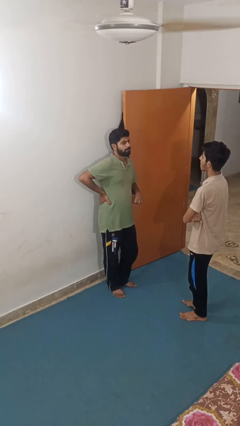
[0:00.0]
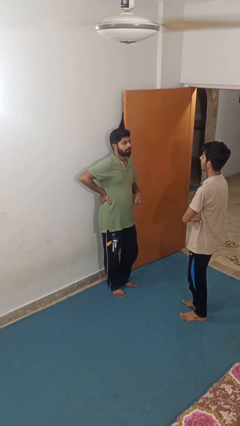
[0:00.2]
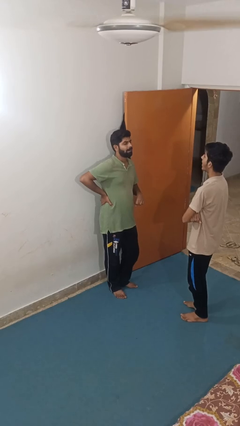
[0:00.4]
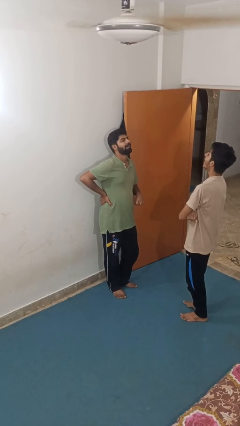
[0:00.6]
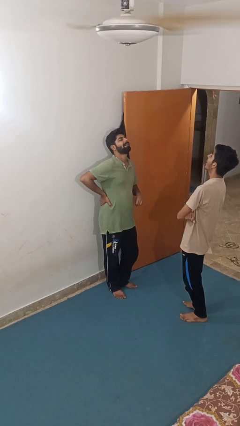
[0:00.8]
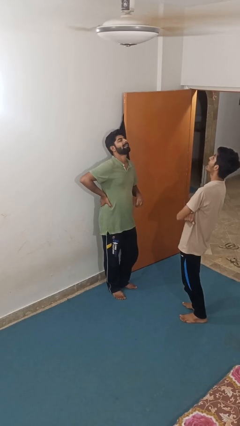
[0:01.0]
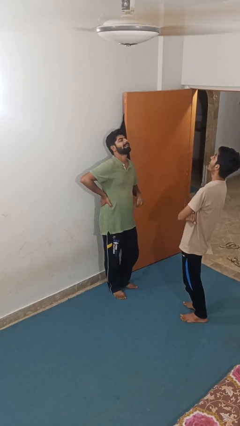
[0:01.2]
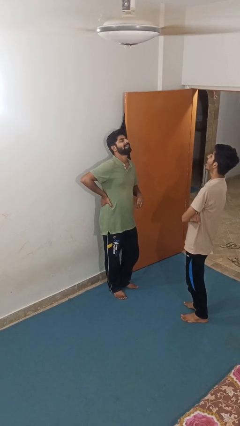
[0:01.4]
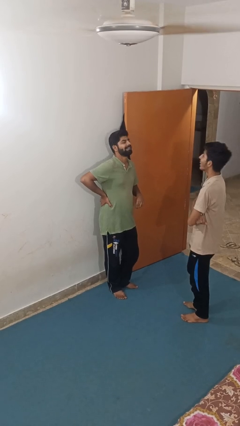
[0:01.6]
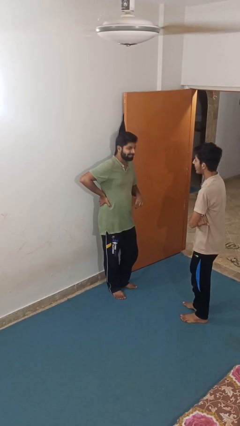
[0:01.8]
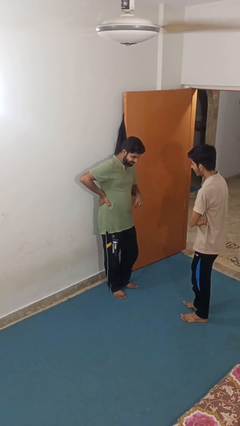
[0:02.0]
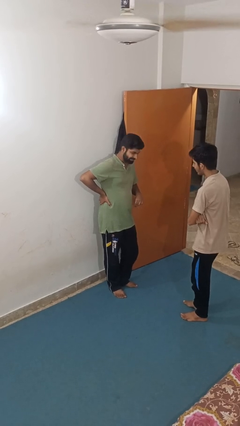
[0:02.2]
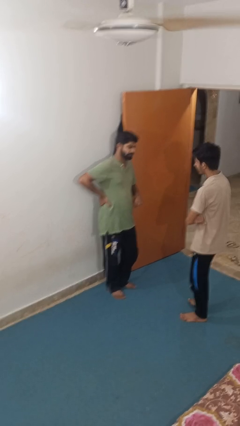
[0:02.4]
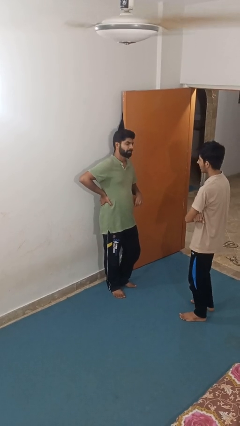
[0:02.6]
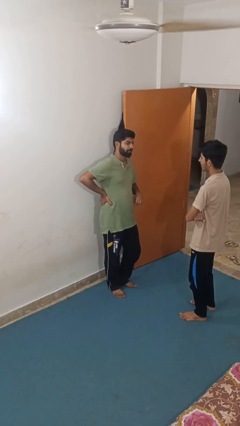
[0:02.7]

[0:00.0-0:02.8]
person laughs with person

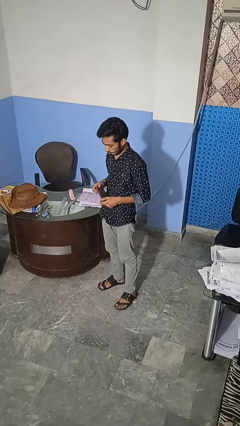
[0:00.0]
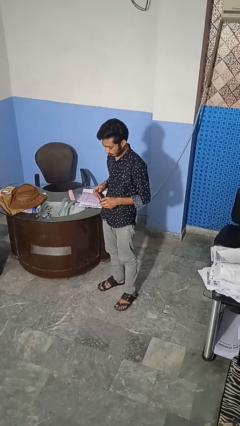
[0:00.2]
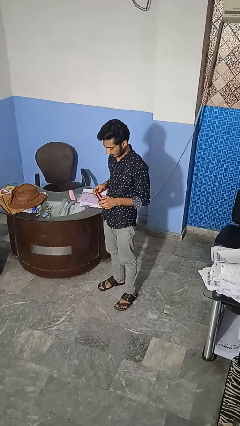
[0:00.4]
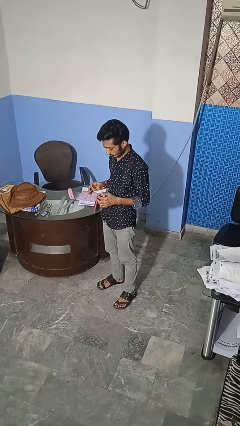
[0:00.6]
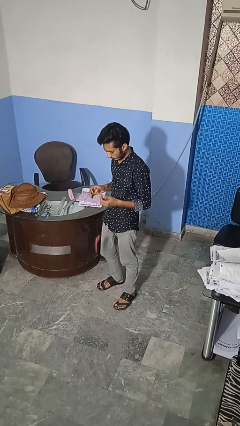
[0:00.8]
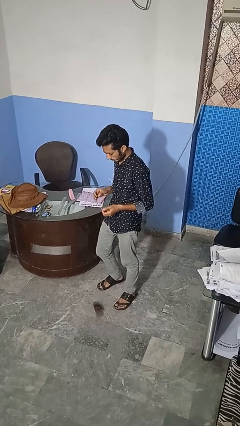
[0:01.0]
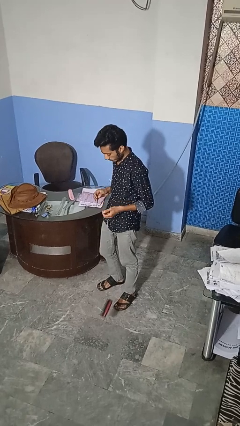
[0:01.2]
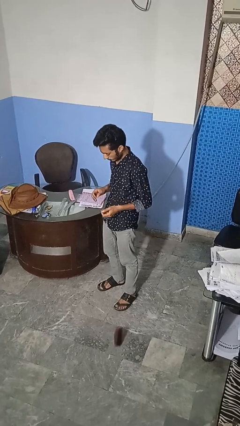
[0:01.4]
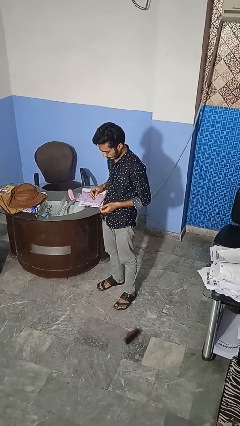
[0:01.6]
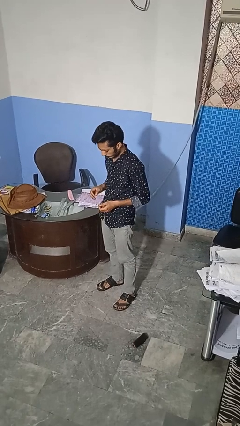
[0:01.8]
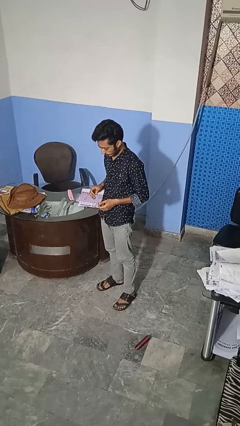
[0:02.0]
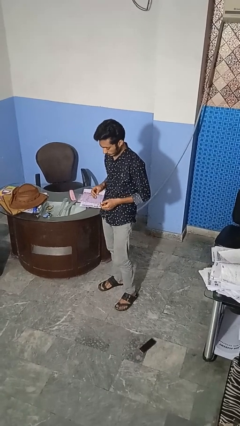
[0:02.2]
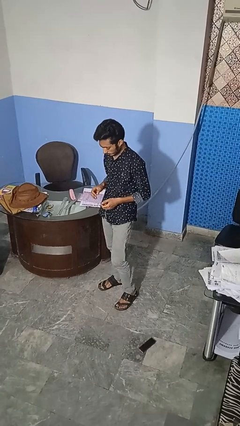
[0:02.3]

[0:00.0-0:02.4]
person drops object

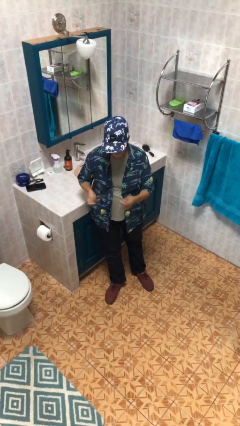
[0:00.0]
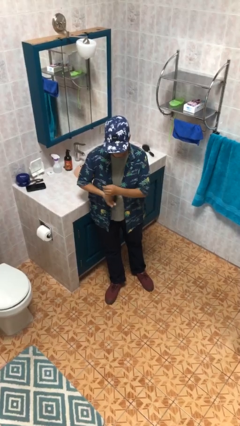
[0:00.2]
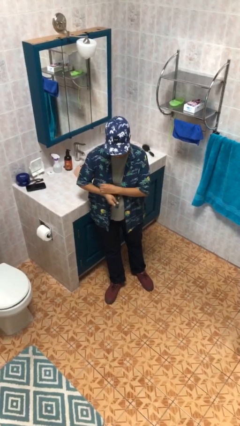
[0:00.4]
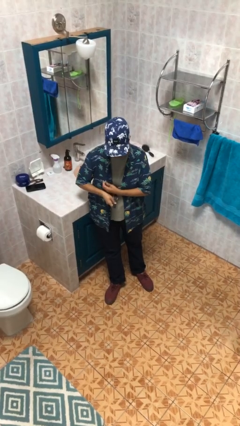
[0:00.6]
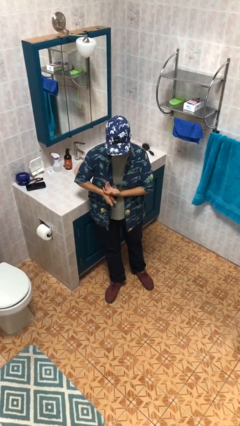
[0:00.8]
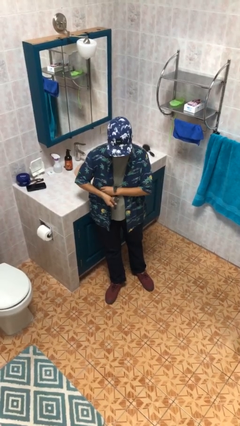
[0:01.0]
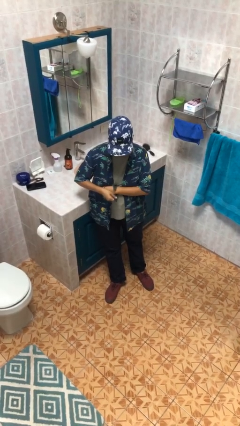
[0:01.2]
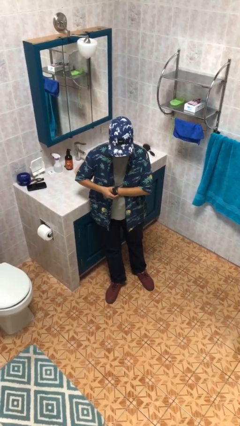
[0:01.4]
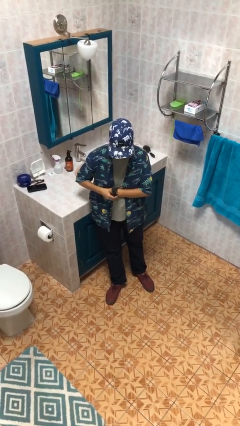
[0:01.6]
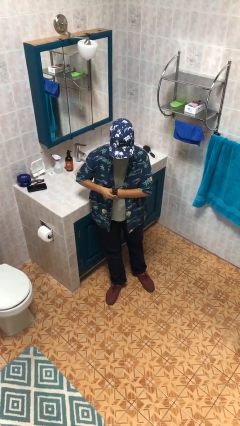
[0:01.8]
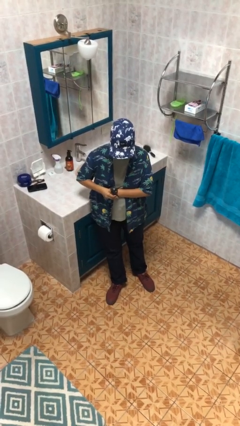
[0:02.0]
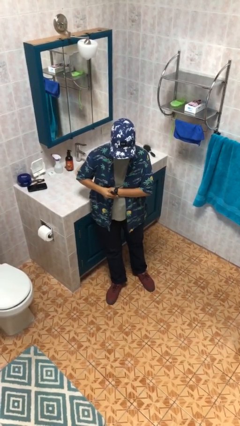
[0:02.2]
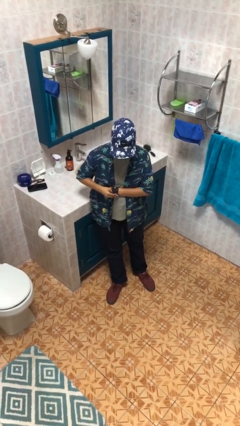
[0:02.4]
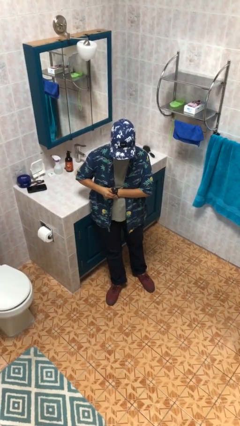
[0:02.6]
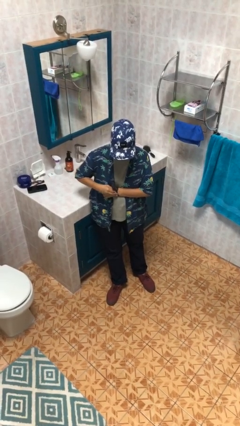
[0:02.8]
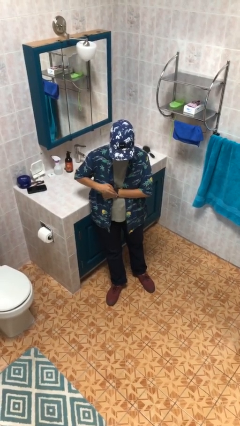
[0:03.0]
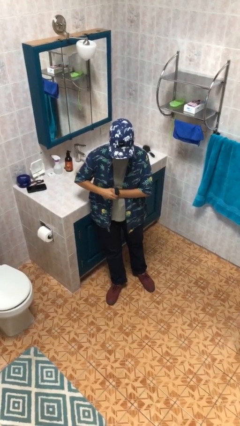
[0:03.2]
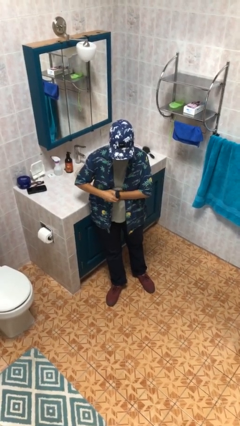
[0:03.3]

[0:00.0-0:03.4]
person puts on wristwatch

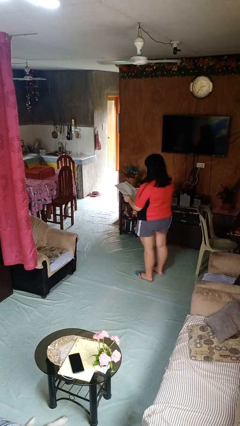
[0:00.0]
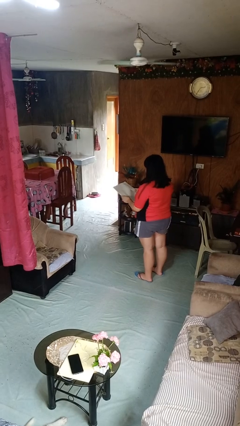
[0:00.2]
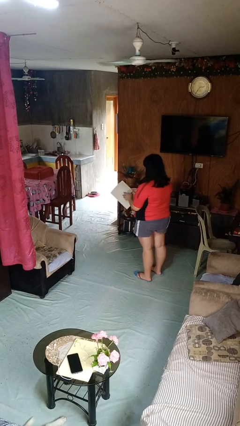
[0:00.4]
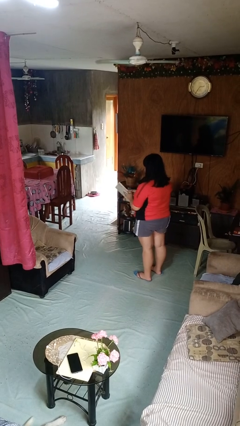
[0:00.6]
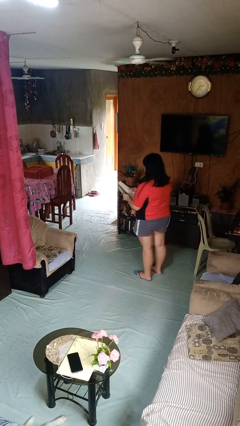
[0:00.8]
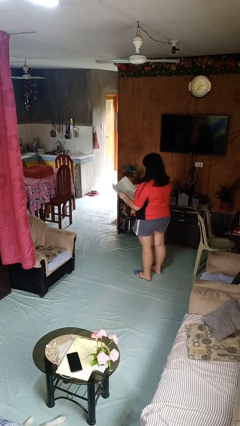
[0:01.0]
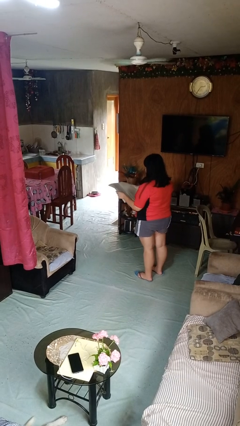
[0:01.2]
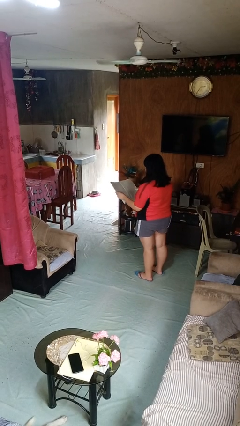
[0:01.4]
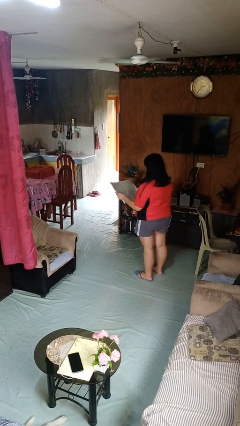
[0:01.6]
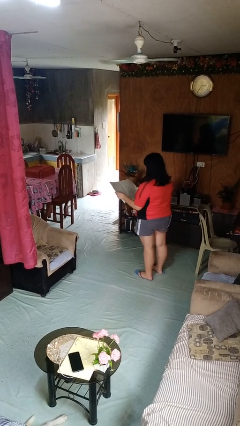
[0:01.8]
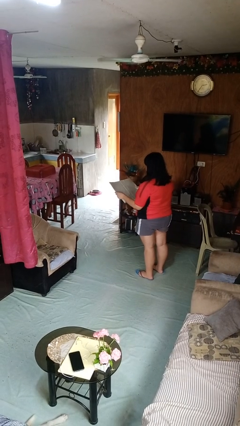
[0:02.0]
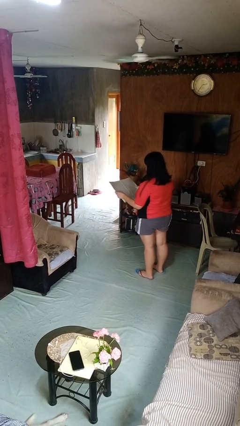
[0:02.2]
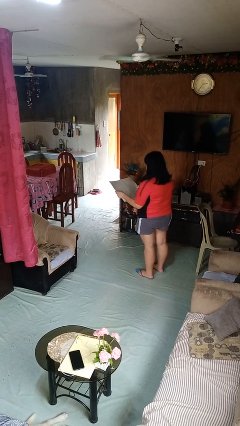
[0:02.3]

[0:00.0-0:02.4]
person reads newspaper

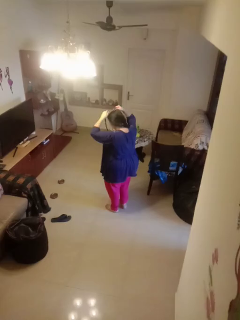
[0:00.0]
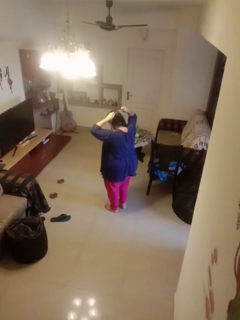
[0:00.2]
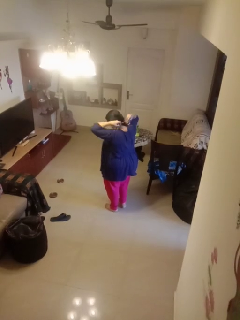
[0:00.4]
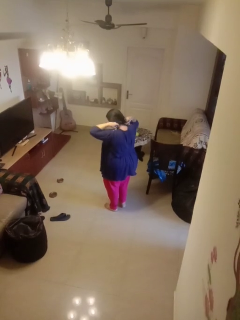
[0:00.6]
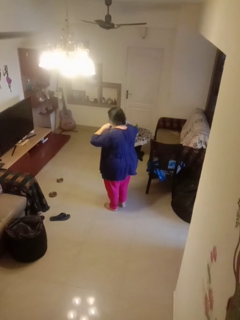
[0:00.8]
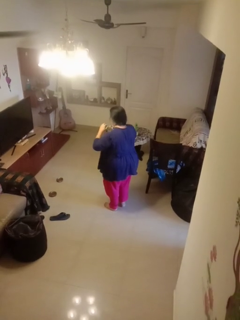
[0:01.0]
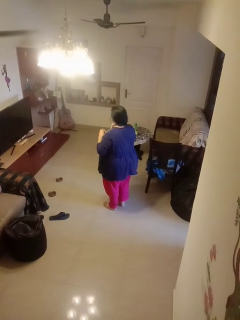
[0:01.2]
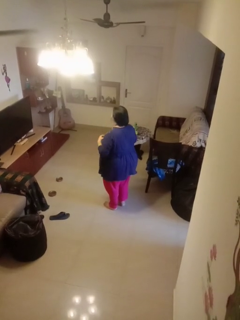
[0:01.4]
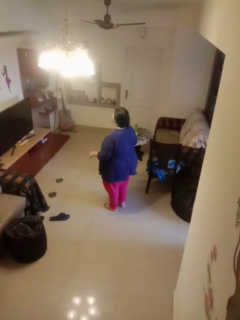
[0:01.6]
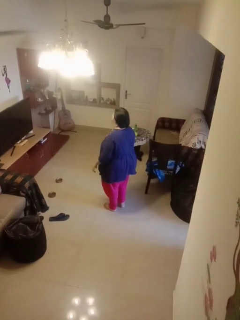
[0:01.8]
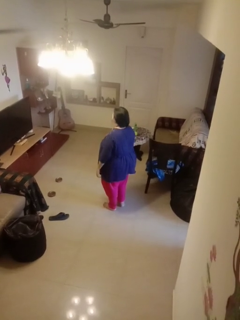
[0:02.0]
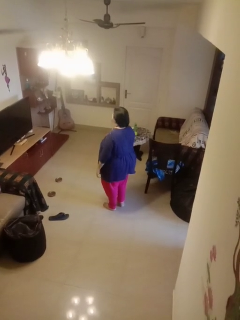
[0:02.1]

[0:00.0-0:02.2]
person puts on necklace

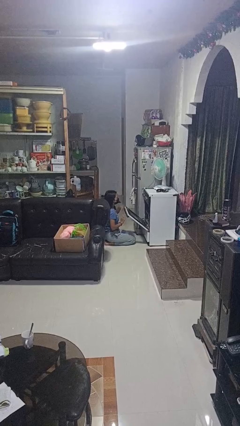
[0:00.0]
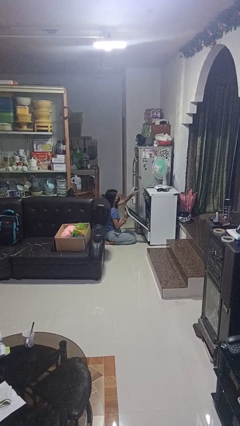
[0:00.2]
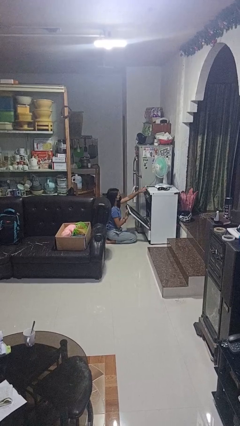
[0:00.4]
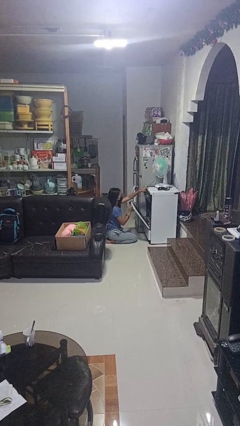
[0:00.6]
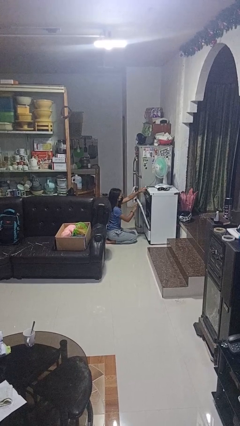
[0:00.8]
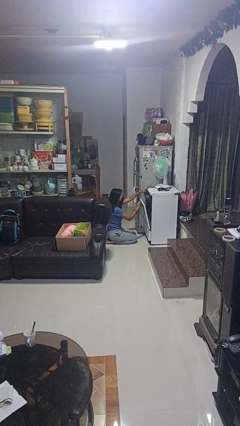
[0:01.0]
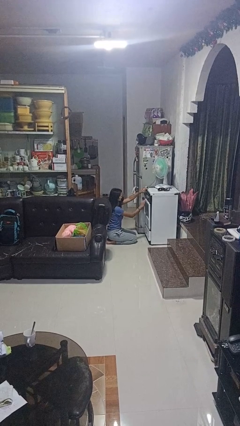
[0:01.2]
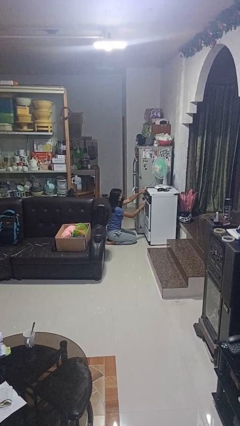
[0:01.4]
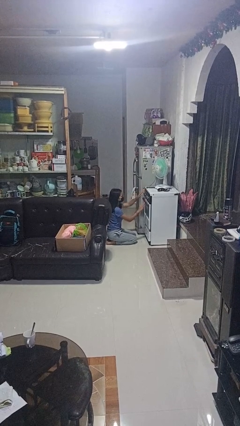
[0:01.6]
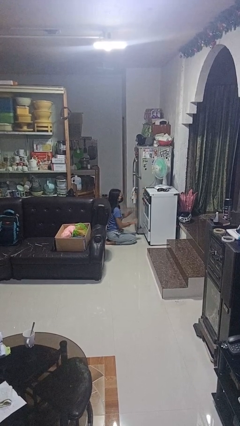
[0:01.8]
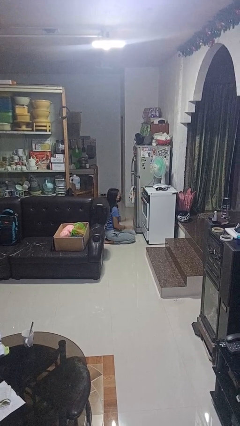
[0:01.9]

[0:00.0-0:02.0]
person closes oven door

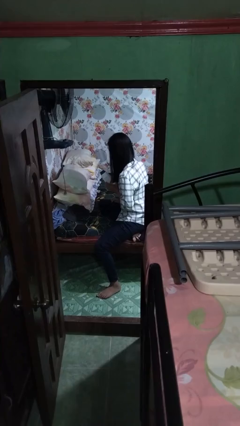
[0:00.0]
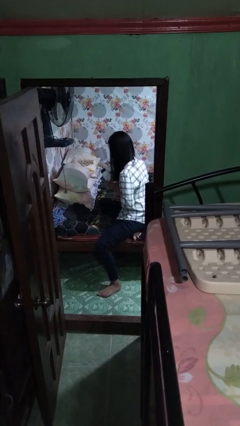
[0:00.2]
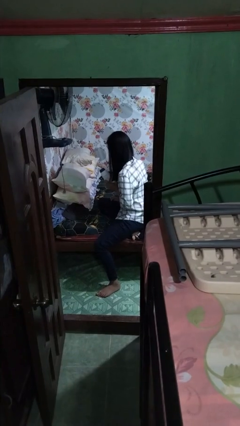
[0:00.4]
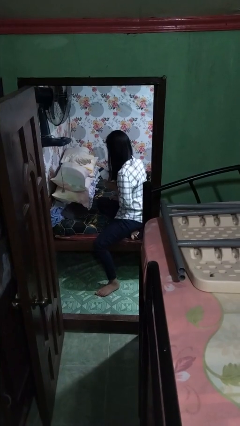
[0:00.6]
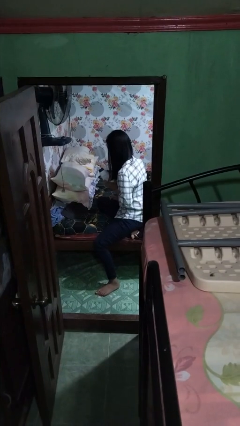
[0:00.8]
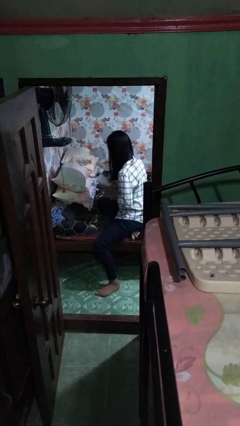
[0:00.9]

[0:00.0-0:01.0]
person puts down object on bed

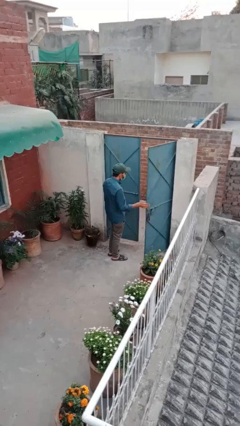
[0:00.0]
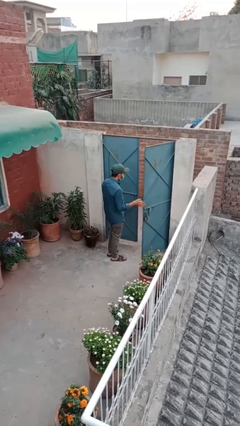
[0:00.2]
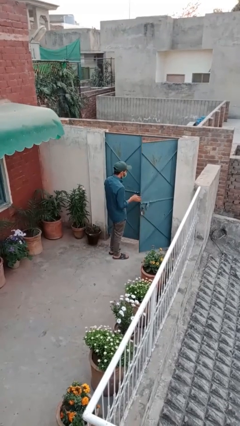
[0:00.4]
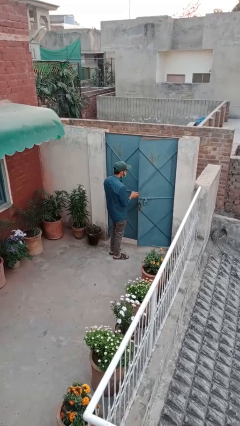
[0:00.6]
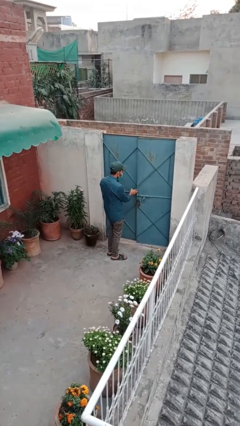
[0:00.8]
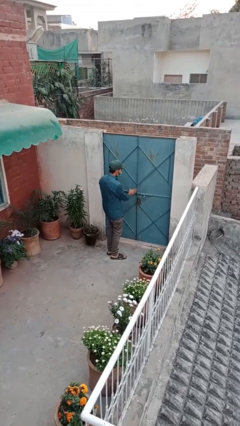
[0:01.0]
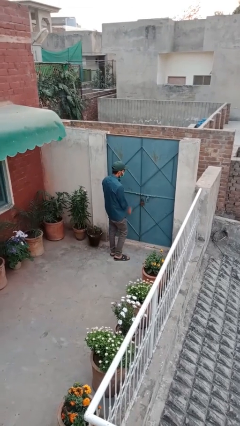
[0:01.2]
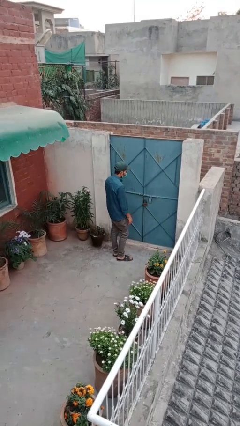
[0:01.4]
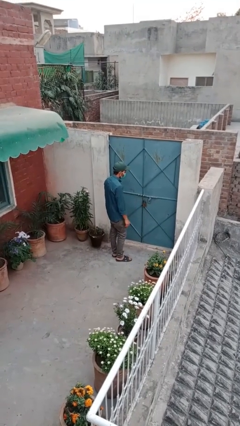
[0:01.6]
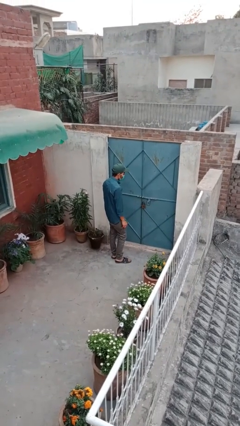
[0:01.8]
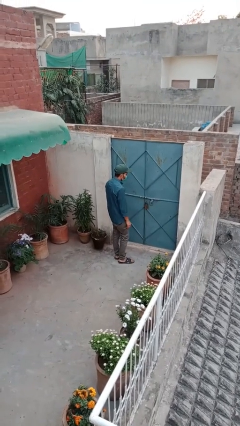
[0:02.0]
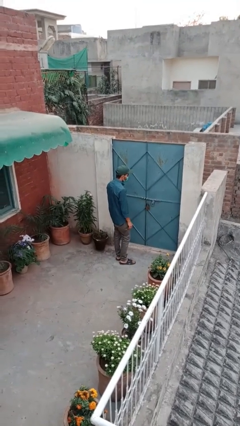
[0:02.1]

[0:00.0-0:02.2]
person closes facility door
